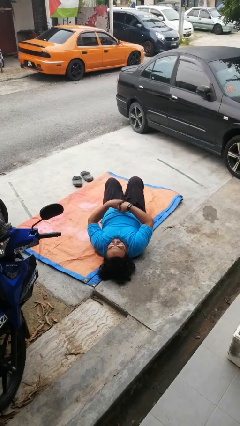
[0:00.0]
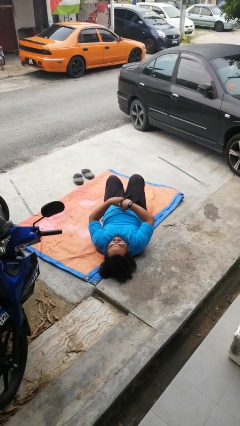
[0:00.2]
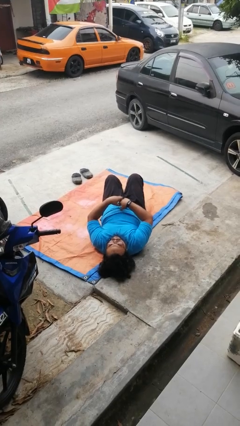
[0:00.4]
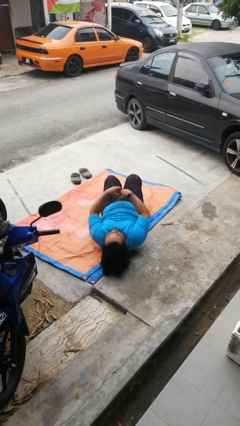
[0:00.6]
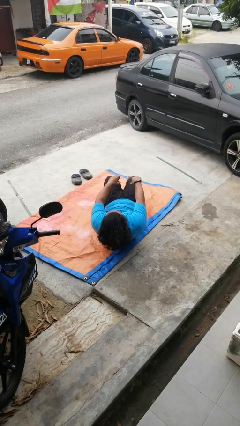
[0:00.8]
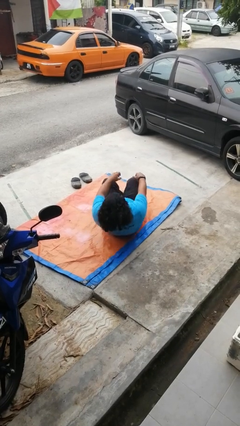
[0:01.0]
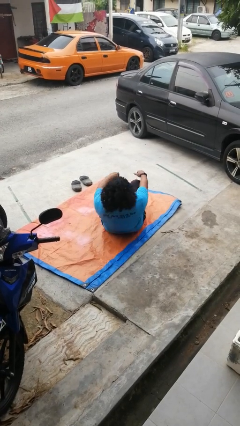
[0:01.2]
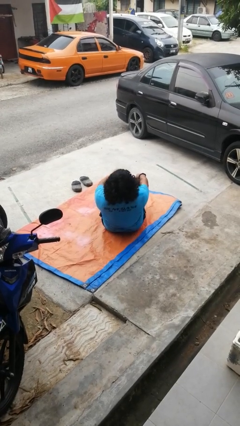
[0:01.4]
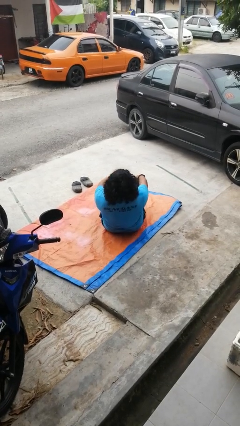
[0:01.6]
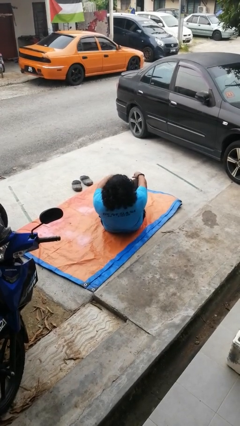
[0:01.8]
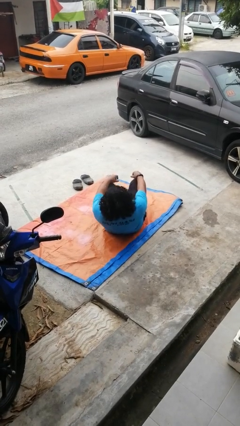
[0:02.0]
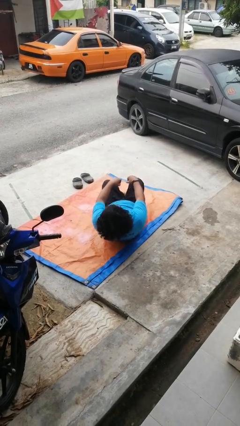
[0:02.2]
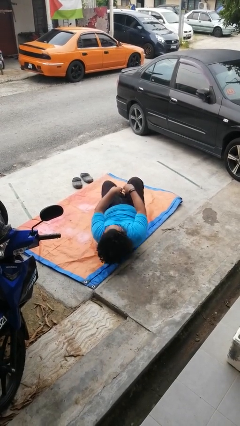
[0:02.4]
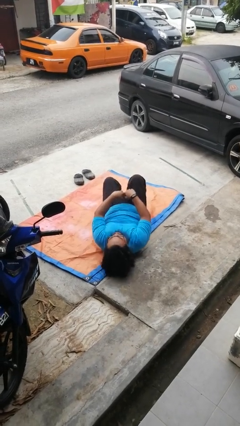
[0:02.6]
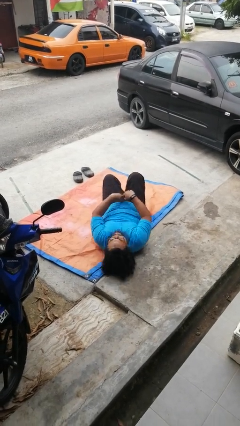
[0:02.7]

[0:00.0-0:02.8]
person exercises with situp

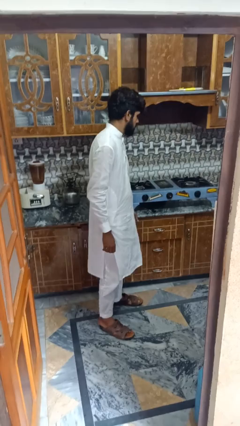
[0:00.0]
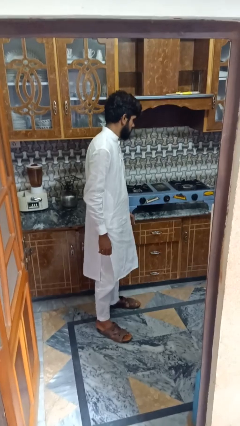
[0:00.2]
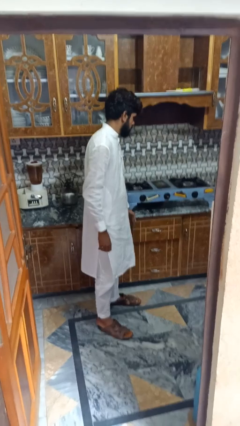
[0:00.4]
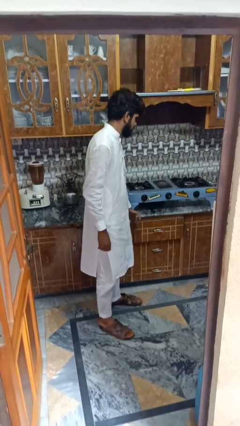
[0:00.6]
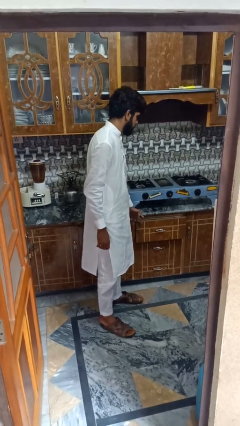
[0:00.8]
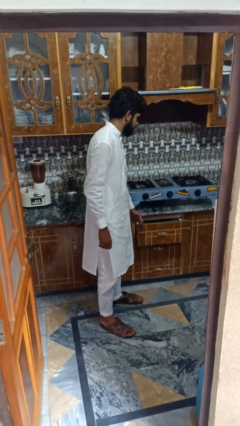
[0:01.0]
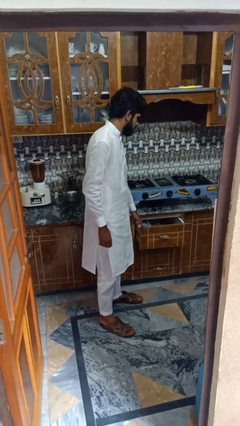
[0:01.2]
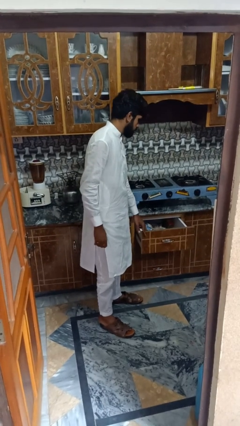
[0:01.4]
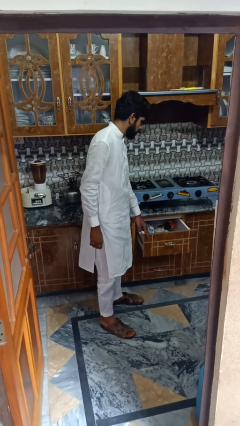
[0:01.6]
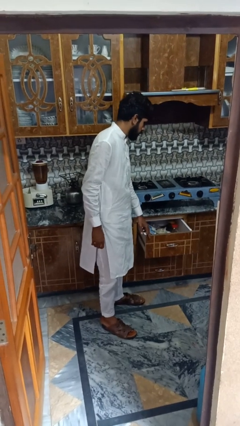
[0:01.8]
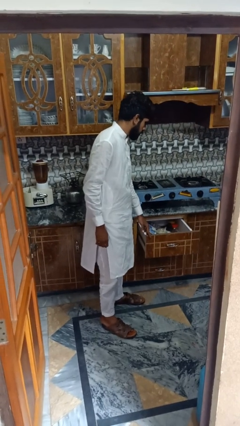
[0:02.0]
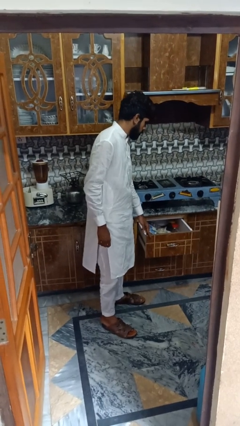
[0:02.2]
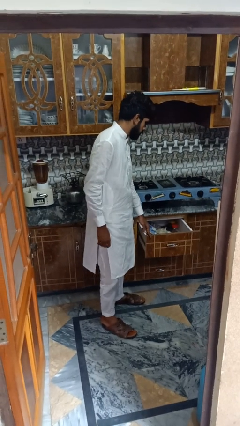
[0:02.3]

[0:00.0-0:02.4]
person opens kitchen drawer

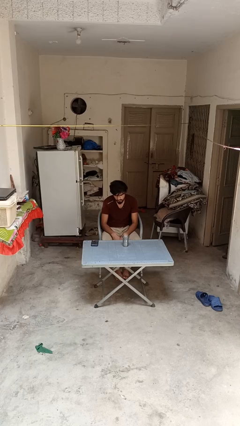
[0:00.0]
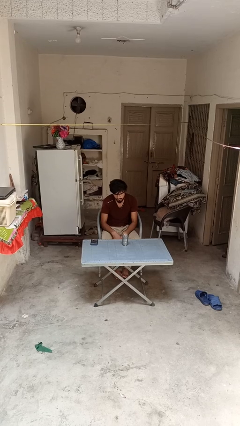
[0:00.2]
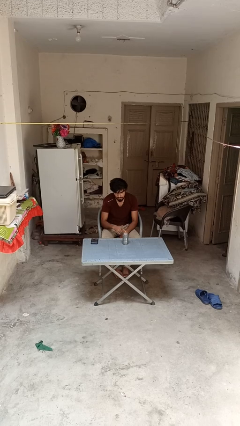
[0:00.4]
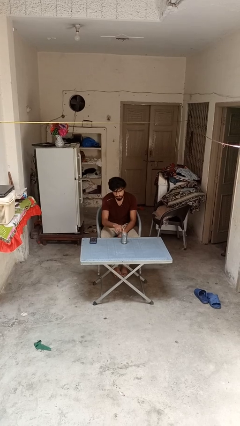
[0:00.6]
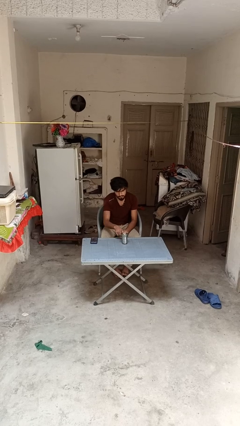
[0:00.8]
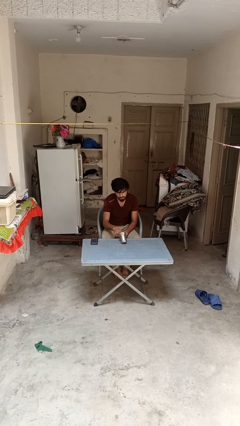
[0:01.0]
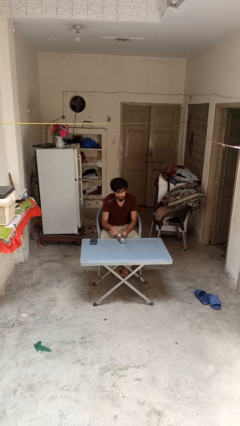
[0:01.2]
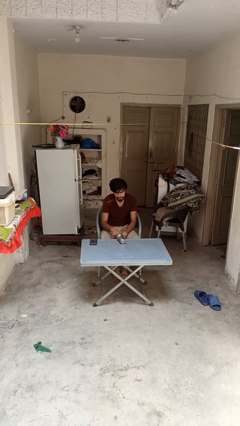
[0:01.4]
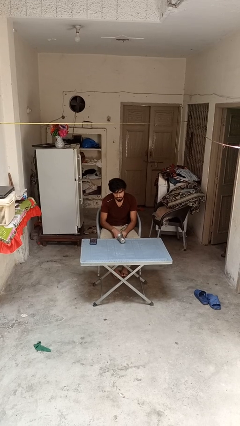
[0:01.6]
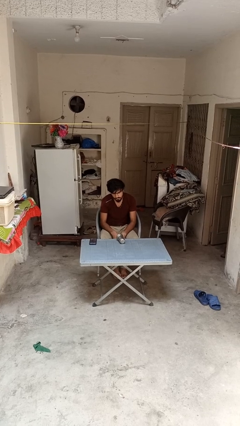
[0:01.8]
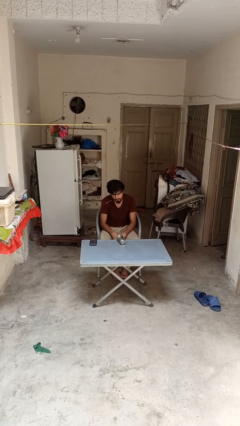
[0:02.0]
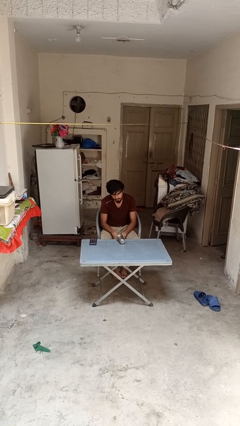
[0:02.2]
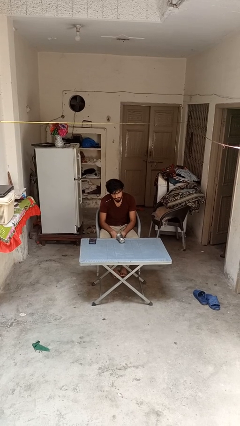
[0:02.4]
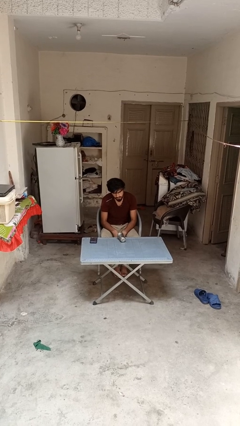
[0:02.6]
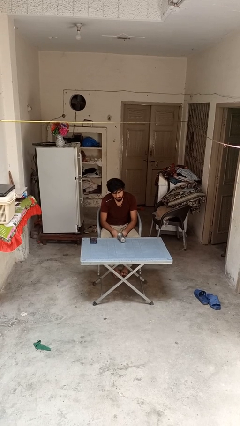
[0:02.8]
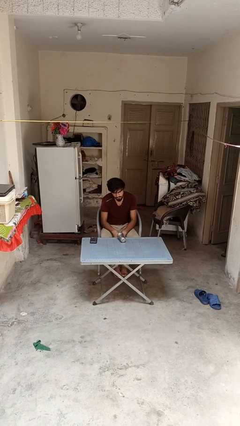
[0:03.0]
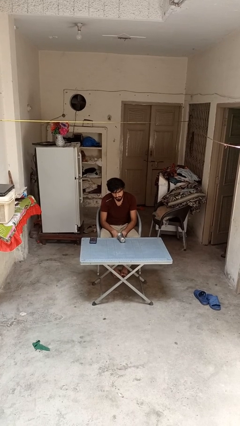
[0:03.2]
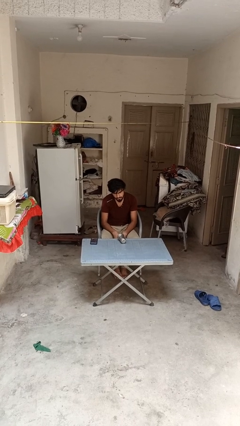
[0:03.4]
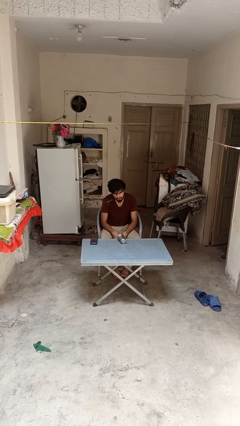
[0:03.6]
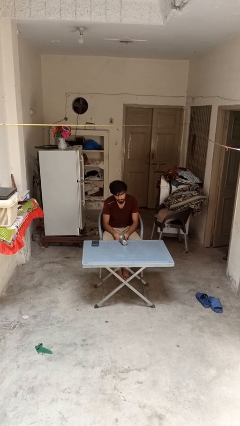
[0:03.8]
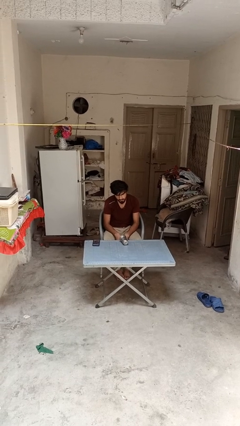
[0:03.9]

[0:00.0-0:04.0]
person knocks over glass

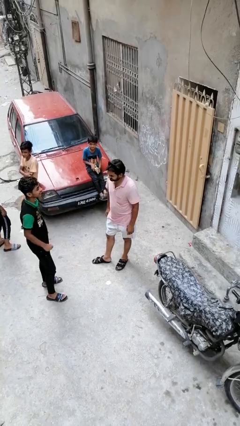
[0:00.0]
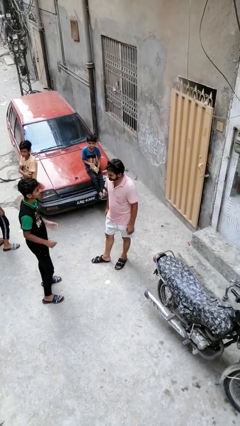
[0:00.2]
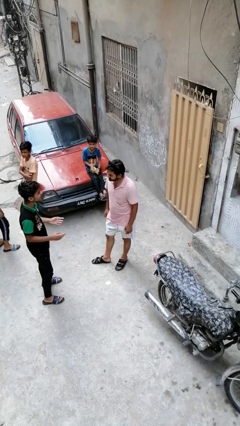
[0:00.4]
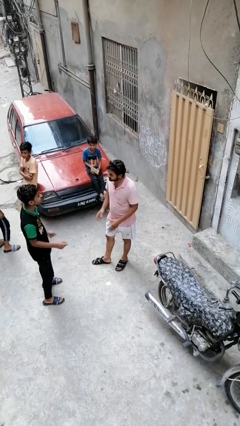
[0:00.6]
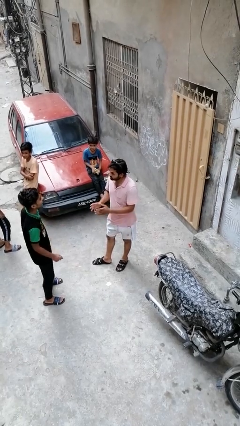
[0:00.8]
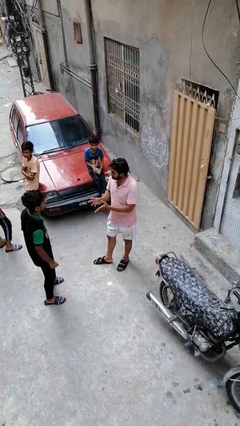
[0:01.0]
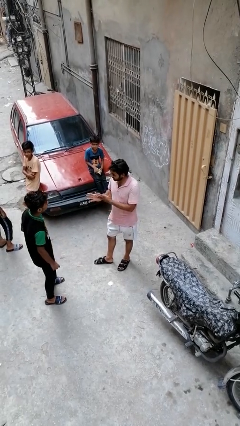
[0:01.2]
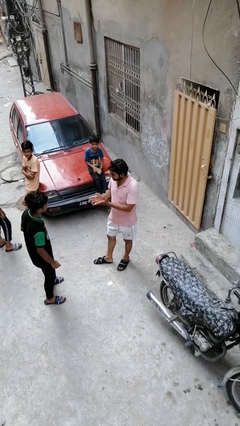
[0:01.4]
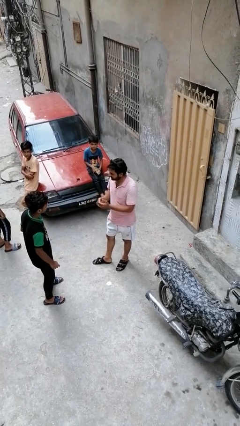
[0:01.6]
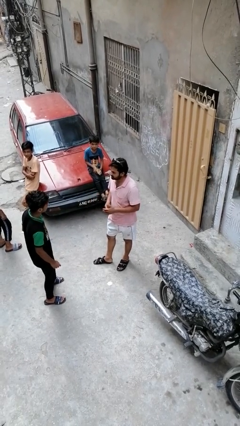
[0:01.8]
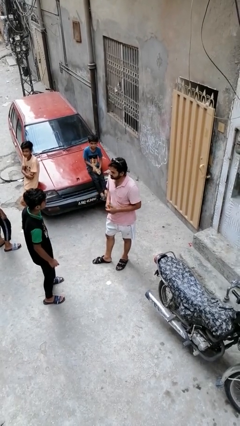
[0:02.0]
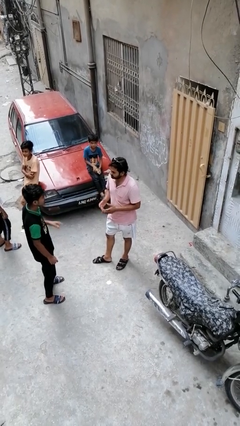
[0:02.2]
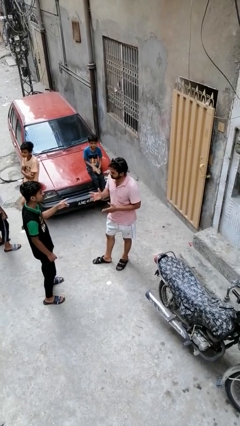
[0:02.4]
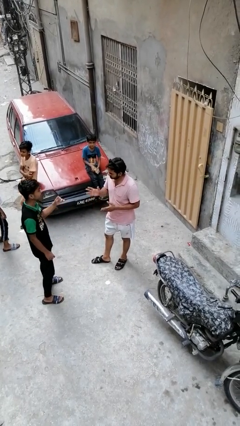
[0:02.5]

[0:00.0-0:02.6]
person talks to person

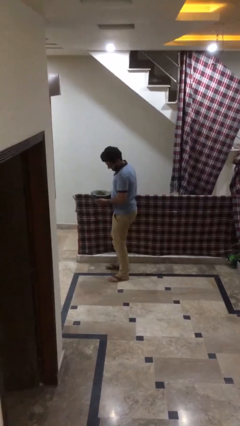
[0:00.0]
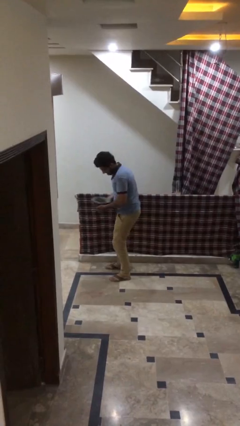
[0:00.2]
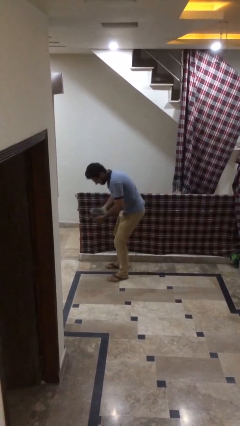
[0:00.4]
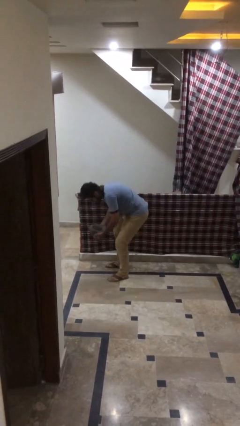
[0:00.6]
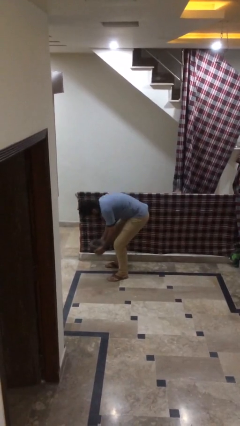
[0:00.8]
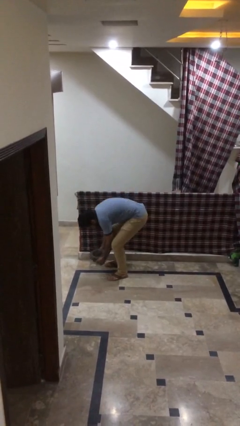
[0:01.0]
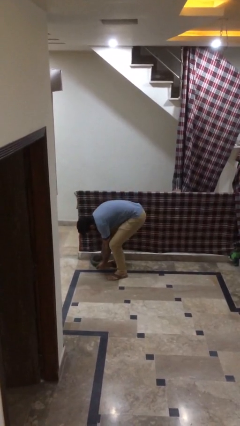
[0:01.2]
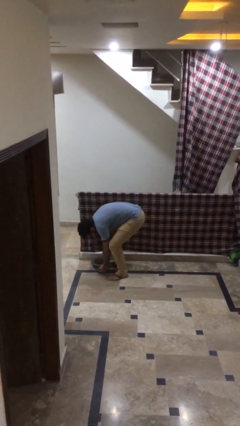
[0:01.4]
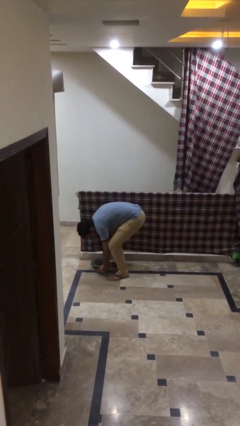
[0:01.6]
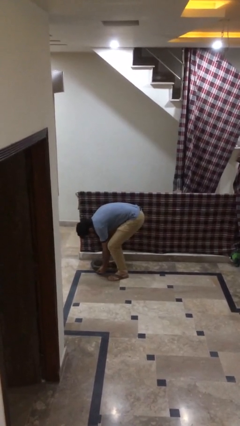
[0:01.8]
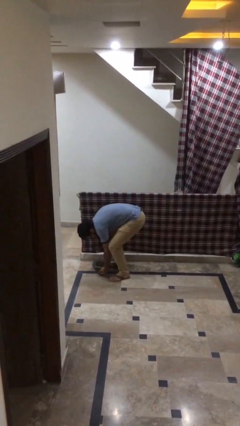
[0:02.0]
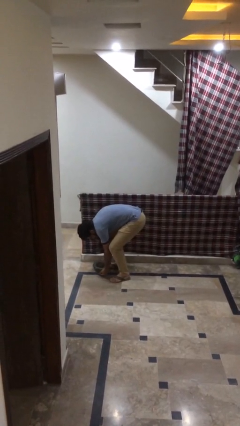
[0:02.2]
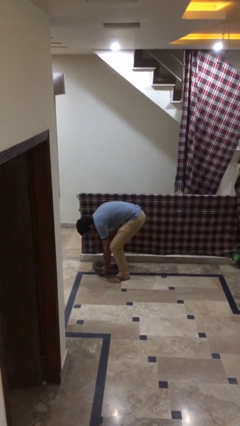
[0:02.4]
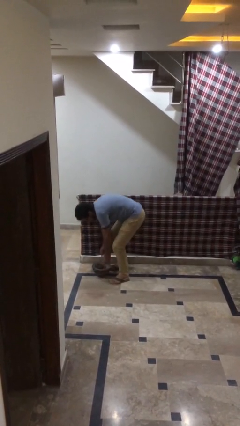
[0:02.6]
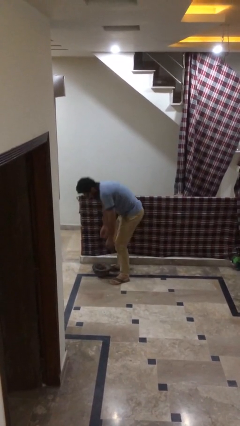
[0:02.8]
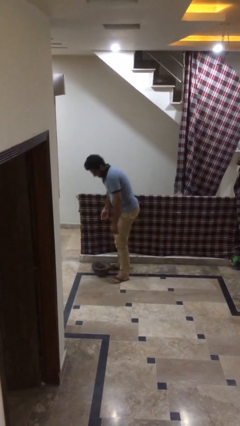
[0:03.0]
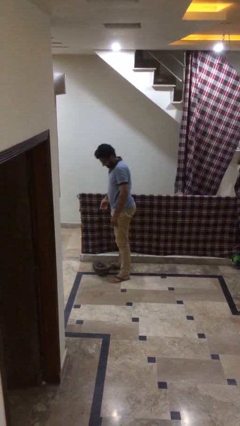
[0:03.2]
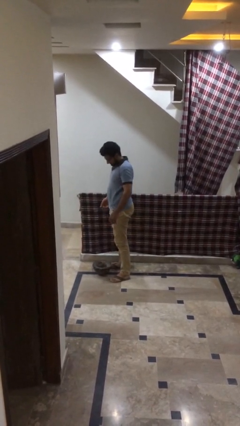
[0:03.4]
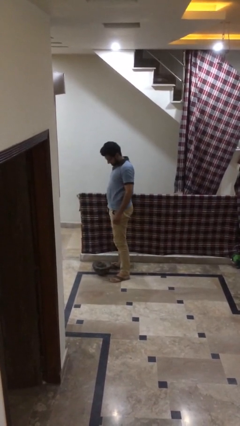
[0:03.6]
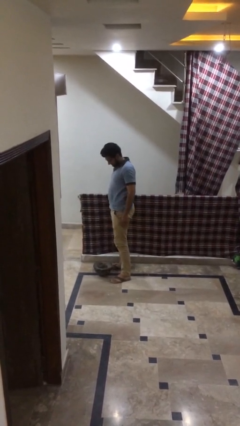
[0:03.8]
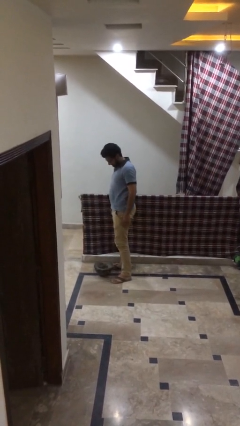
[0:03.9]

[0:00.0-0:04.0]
person puts down object on floor

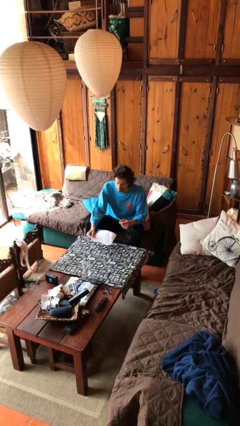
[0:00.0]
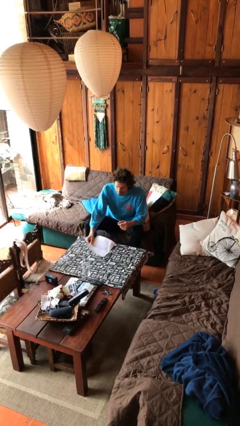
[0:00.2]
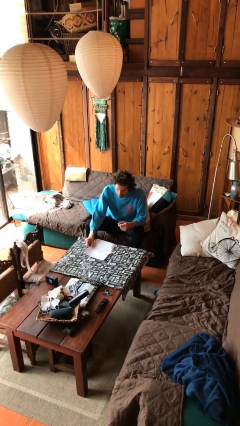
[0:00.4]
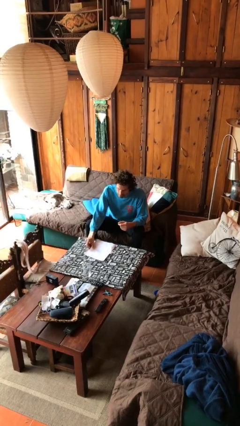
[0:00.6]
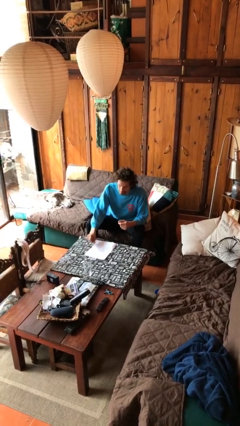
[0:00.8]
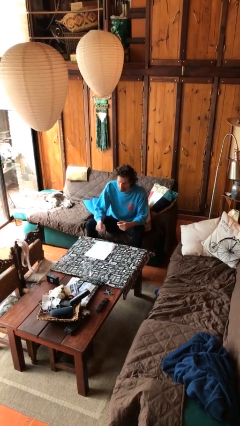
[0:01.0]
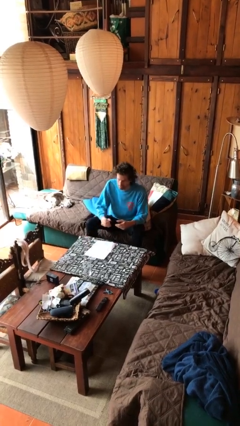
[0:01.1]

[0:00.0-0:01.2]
person puts down object on table

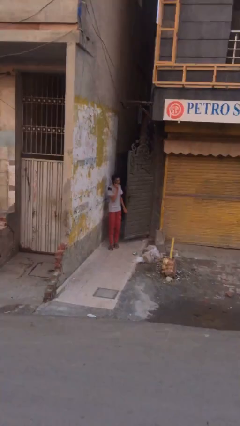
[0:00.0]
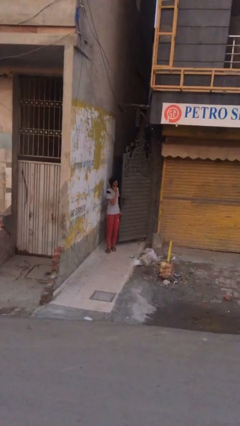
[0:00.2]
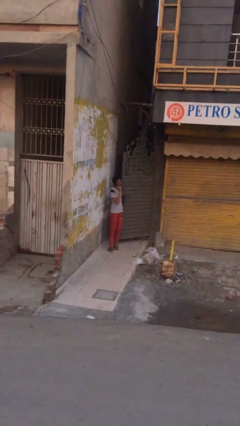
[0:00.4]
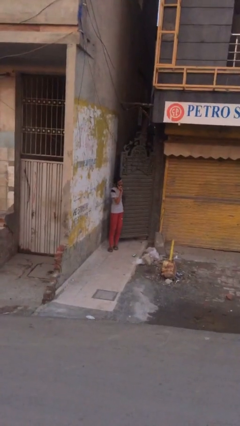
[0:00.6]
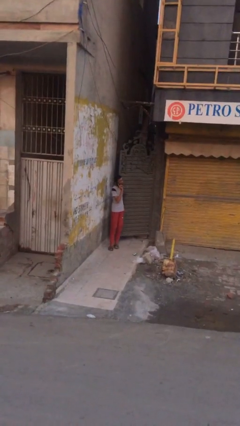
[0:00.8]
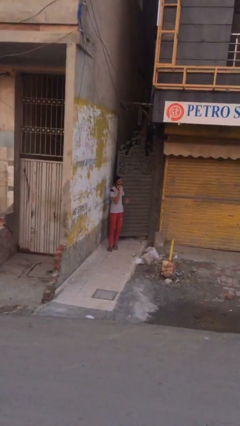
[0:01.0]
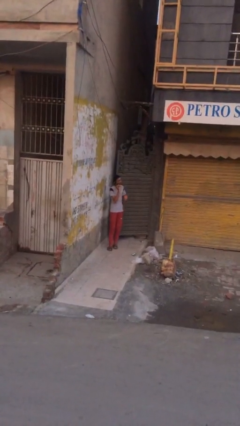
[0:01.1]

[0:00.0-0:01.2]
person closes facility door
